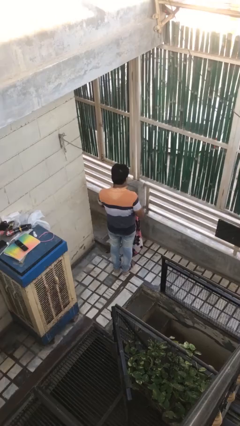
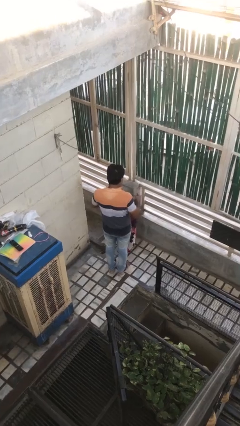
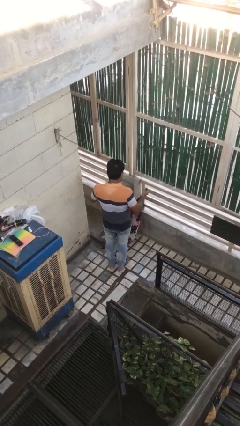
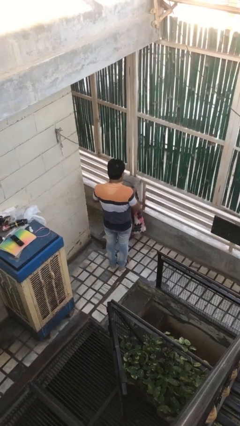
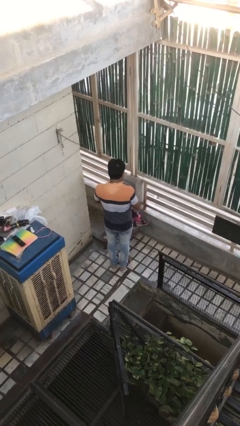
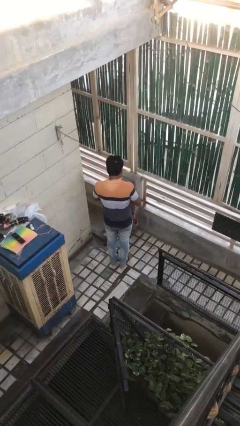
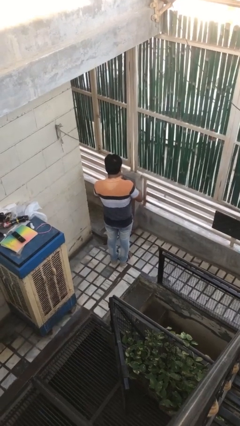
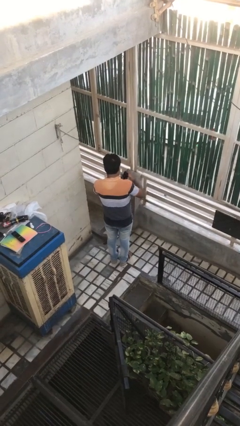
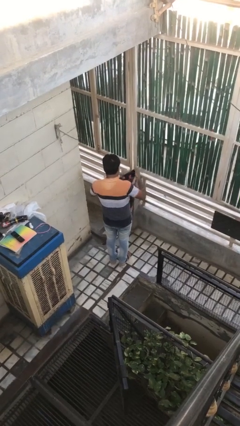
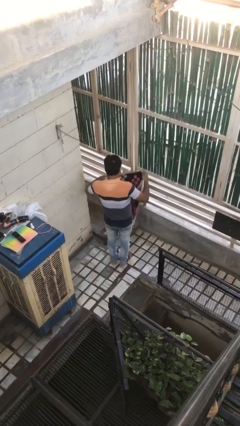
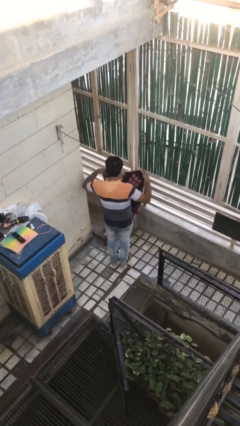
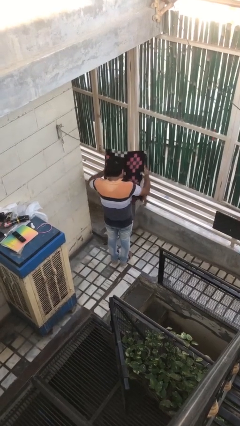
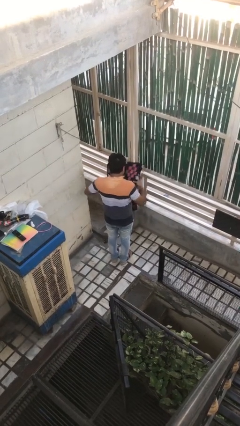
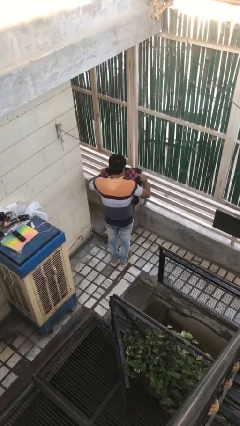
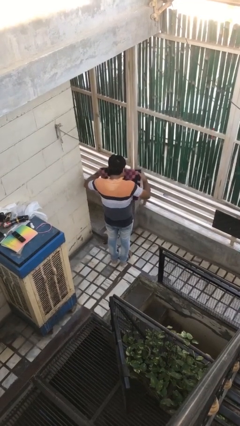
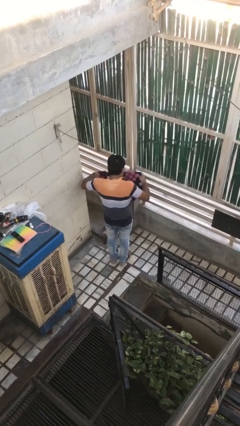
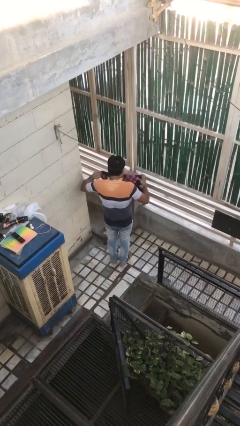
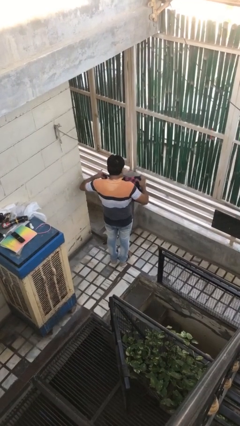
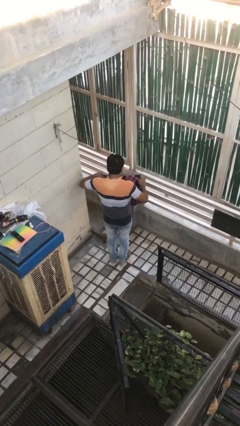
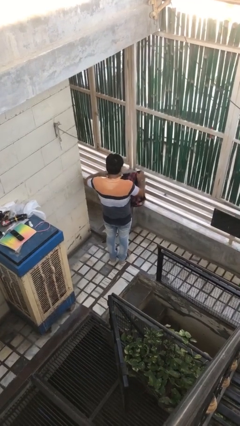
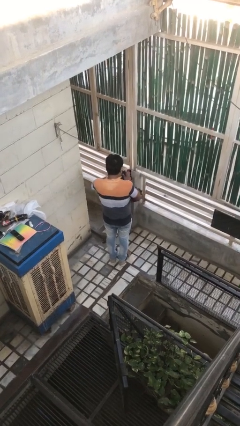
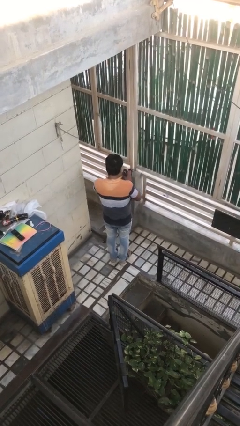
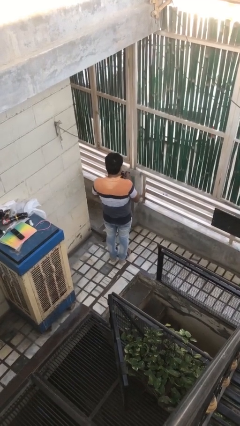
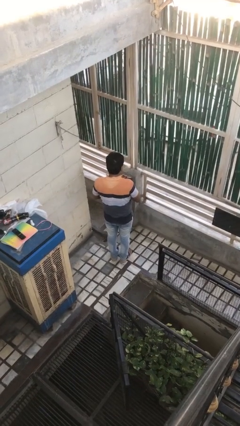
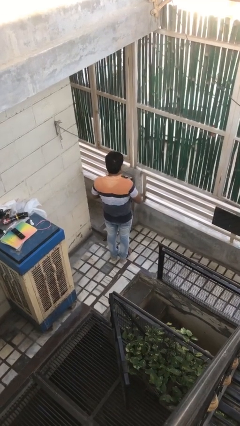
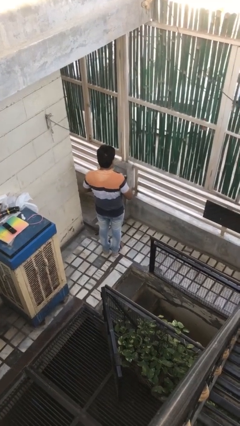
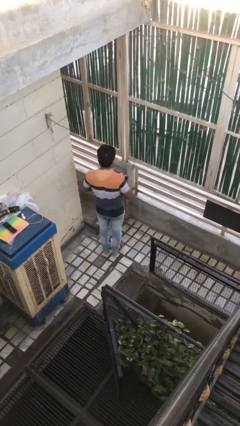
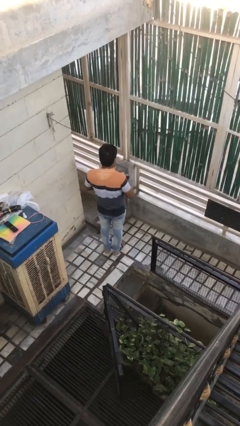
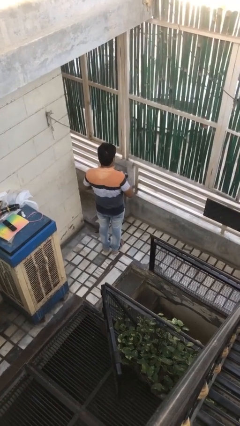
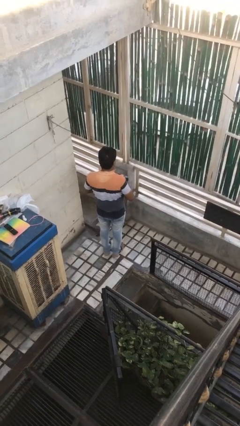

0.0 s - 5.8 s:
person folds blanket

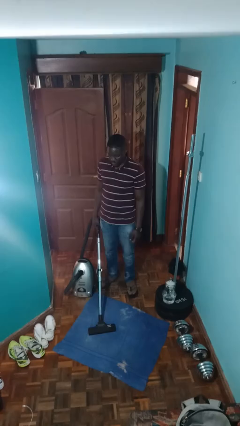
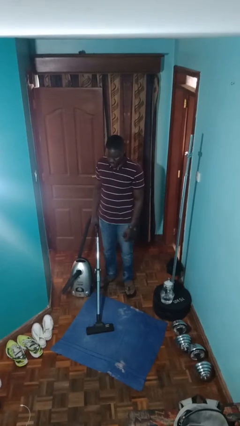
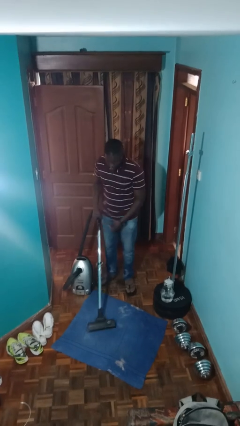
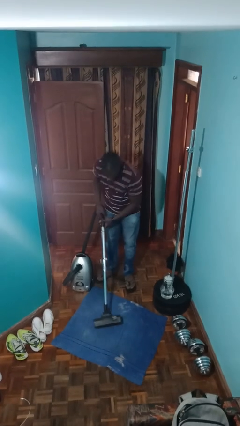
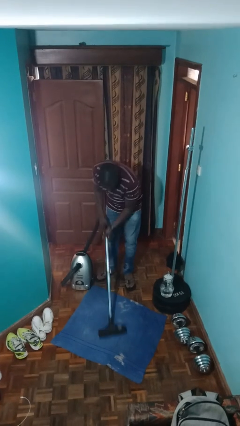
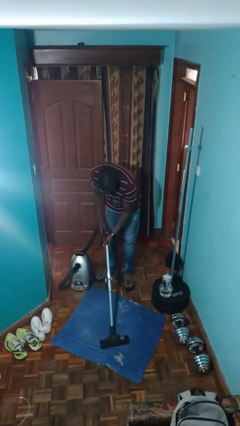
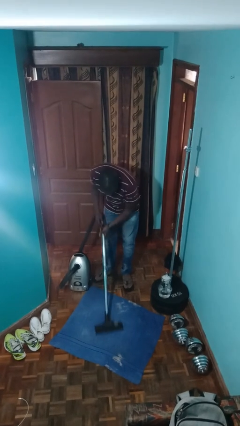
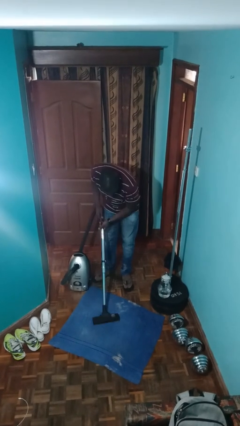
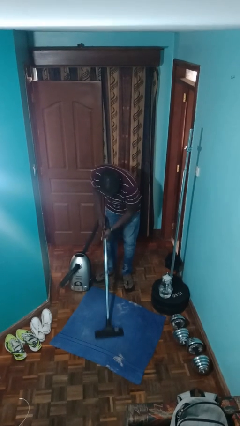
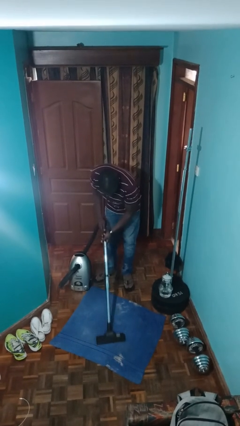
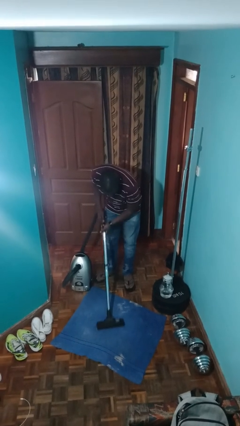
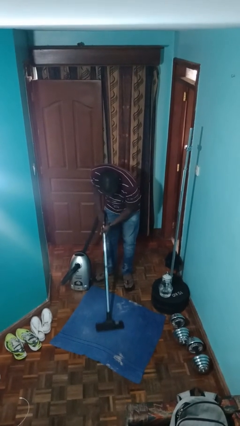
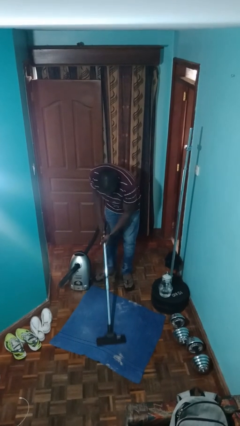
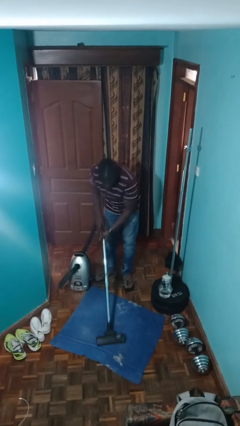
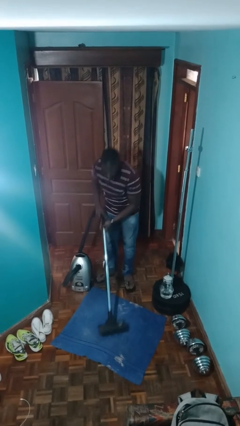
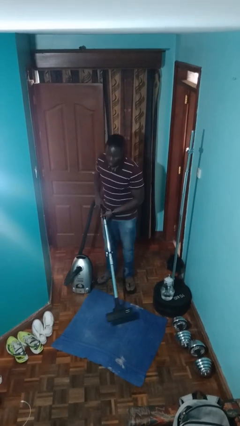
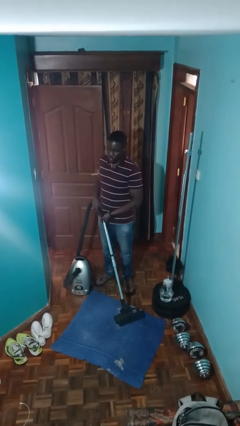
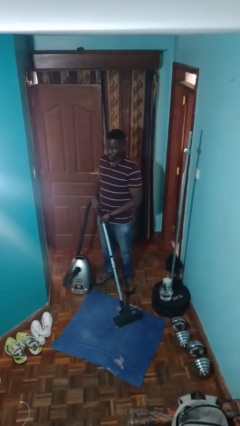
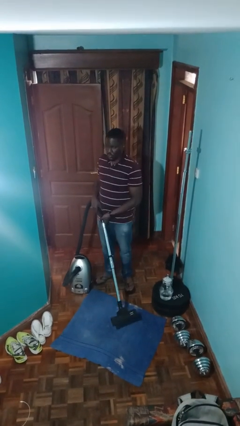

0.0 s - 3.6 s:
person vacuums carpet

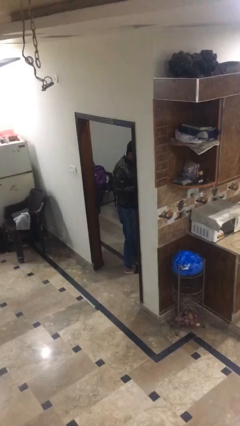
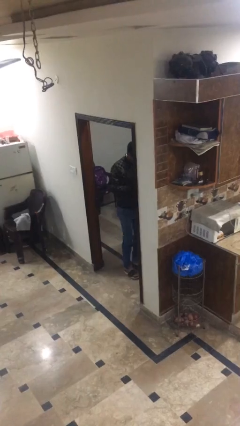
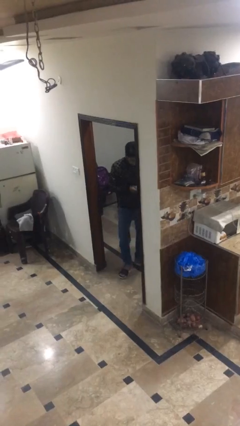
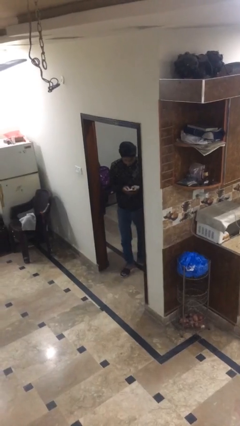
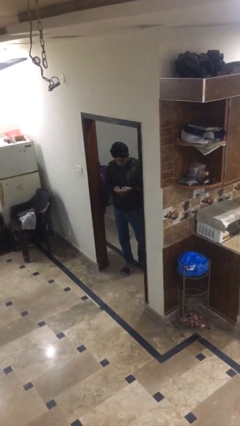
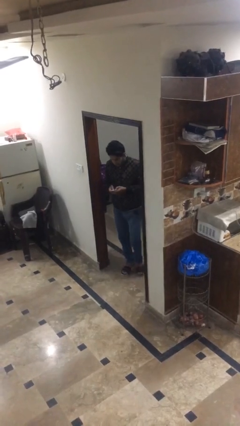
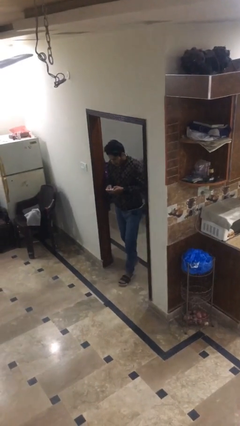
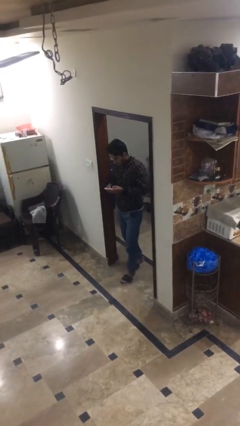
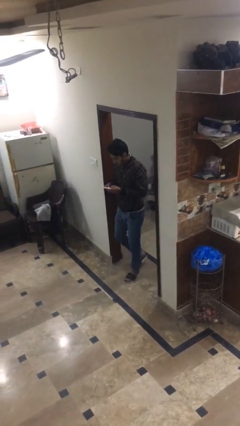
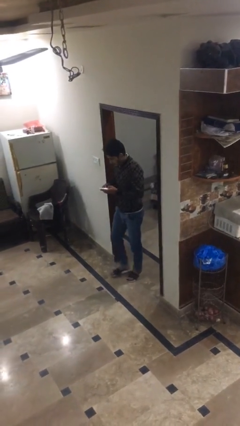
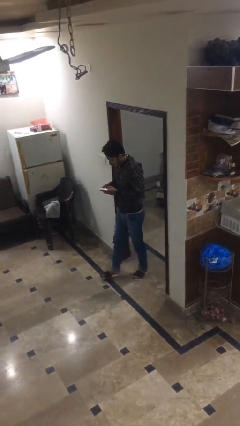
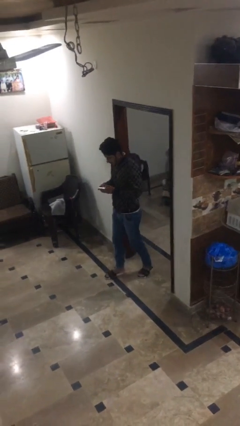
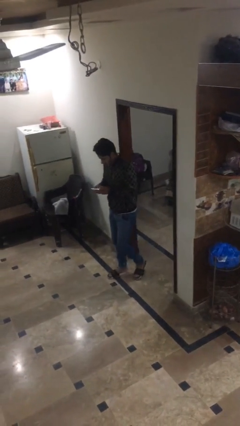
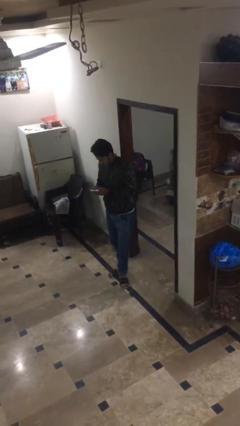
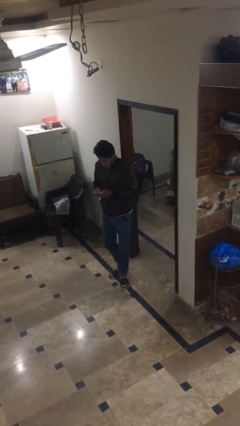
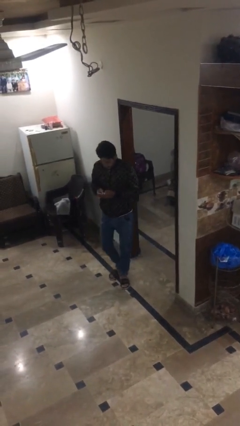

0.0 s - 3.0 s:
person exits scene through structure

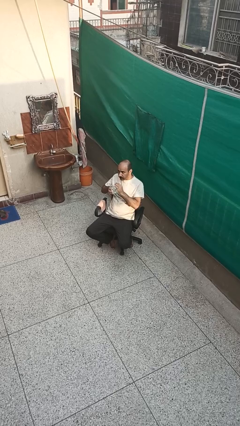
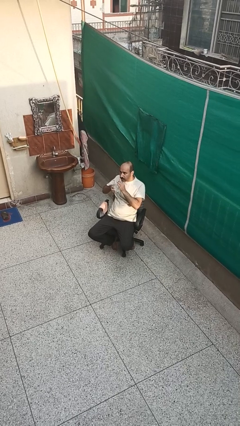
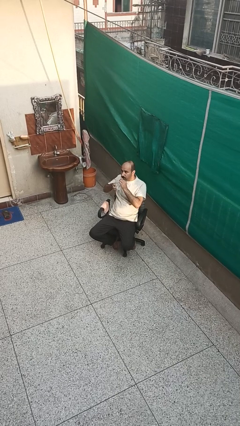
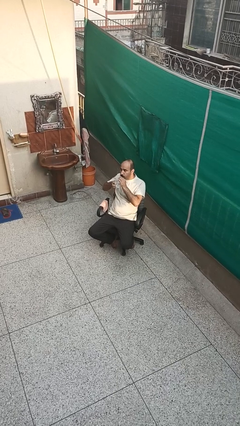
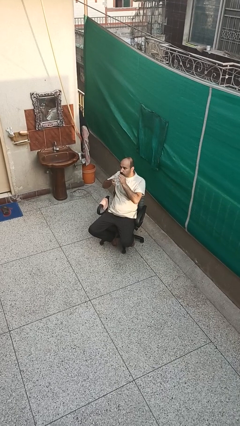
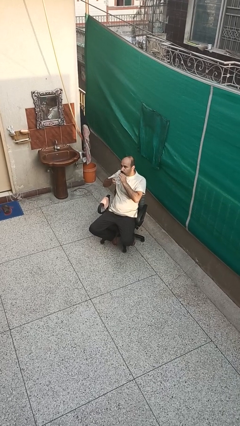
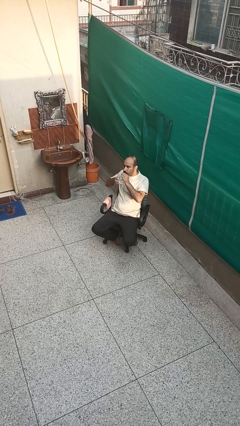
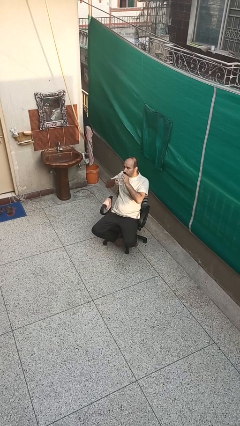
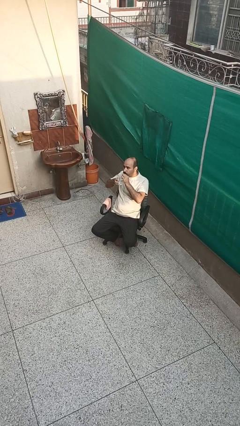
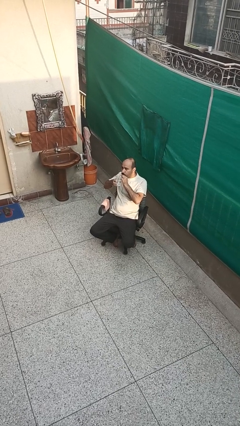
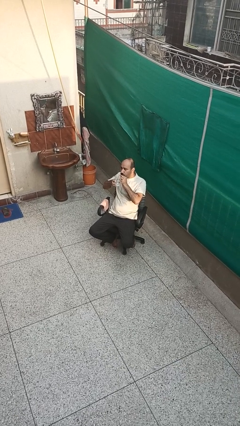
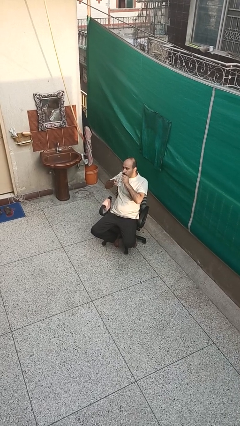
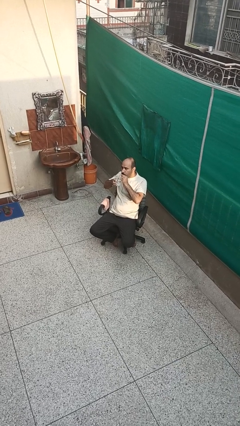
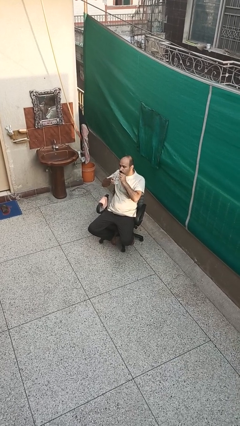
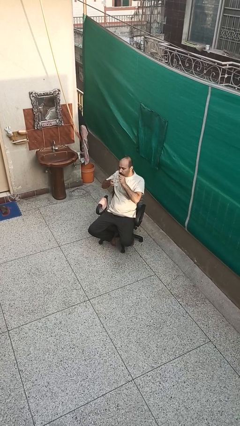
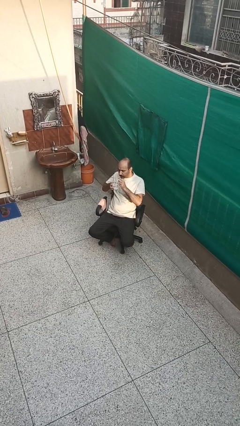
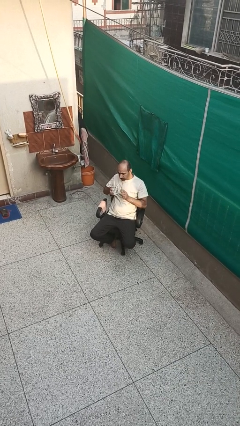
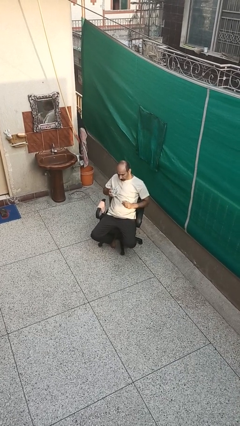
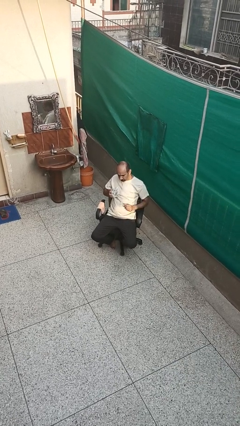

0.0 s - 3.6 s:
person drinks from straw

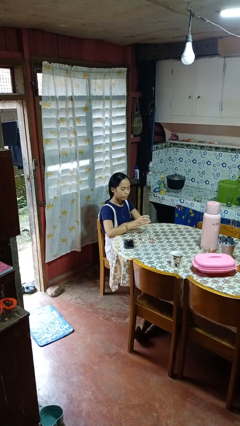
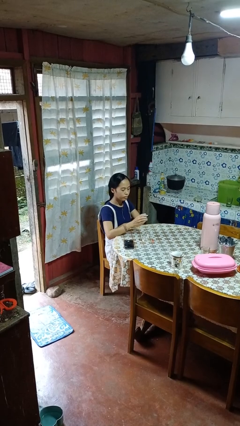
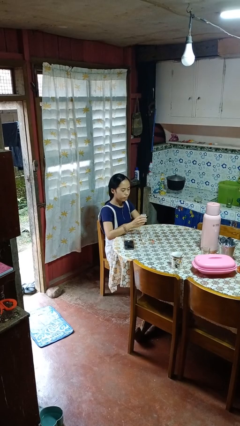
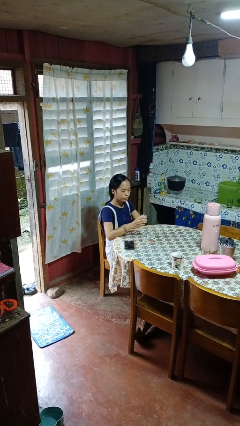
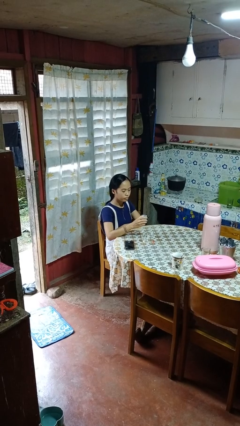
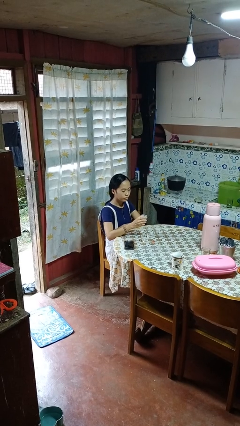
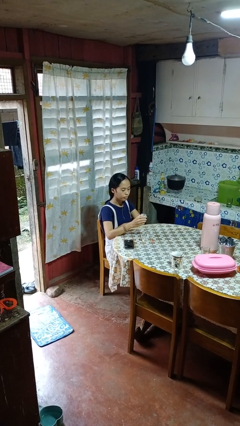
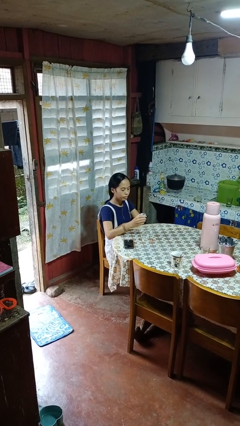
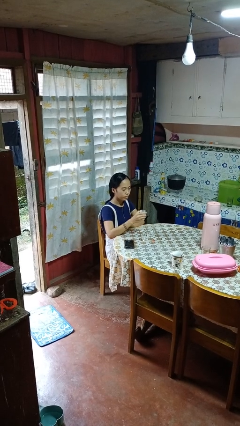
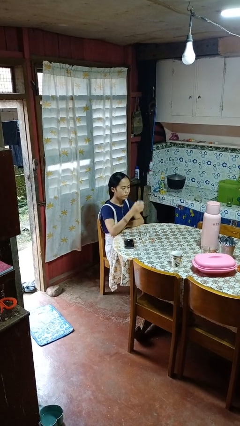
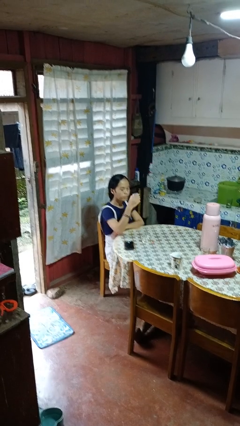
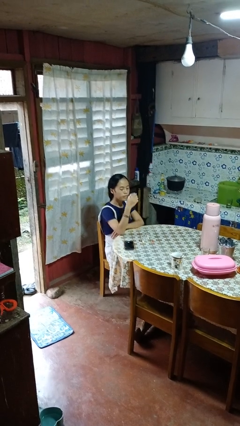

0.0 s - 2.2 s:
person picks up object from table
